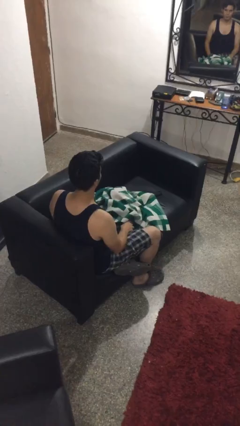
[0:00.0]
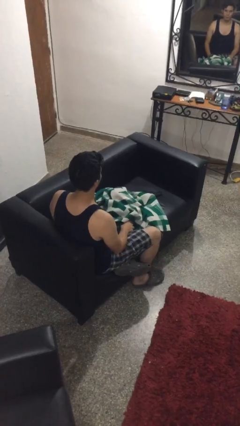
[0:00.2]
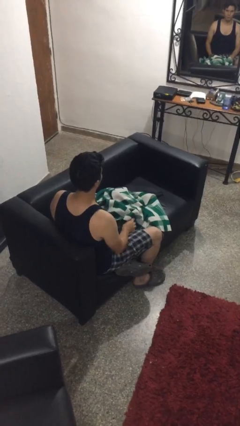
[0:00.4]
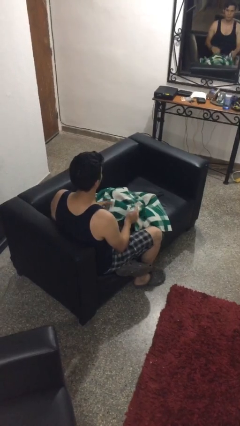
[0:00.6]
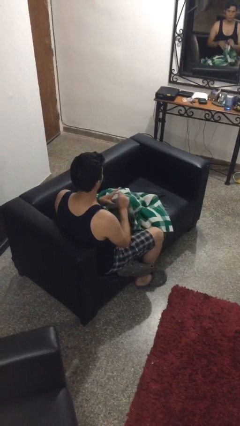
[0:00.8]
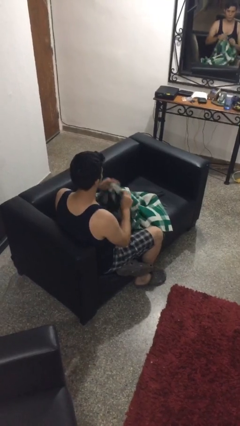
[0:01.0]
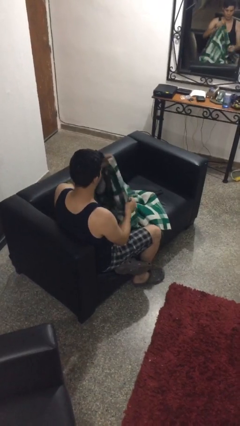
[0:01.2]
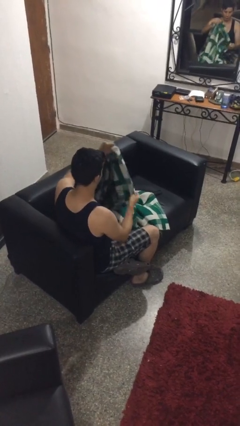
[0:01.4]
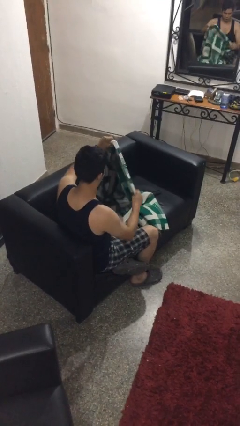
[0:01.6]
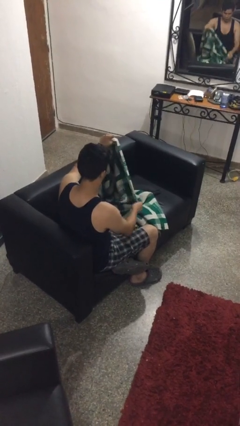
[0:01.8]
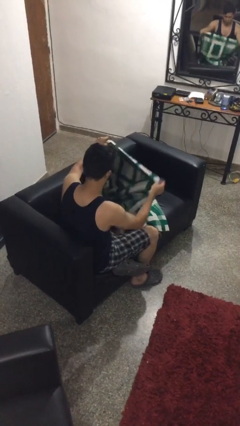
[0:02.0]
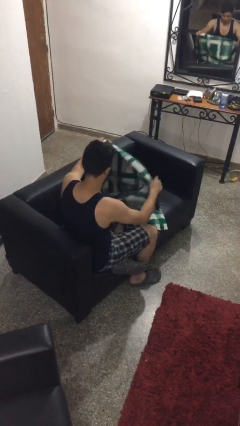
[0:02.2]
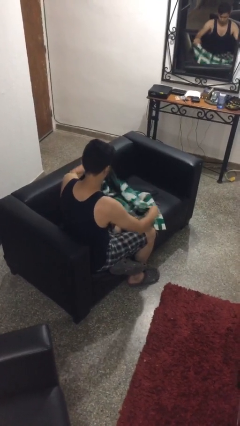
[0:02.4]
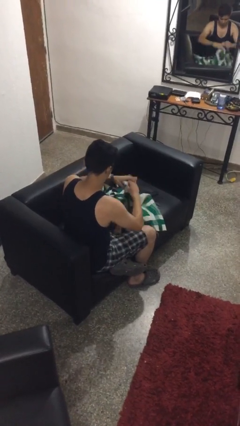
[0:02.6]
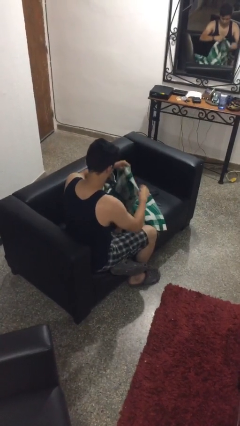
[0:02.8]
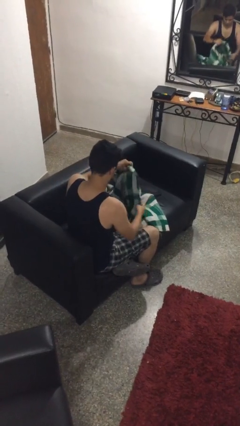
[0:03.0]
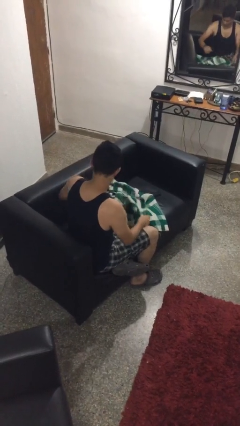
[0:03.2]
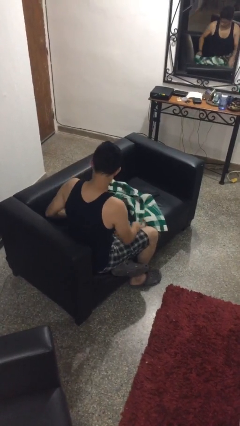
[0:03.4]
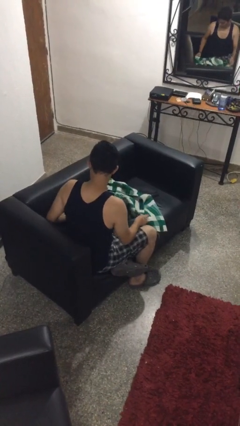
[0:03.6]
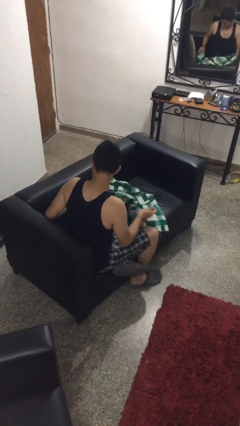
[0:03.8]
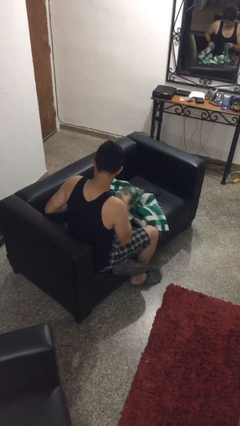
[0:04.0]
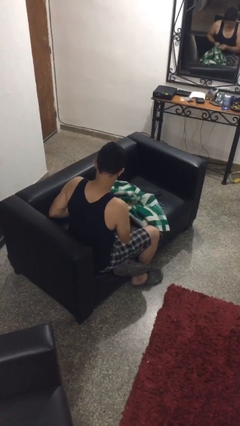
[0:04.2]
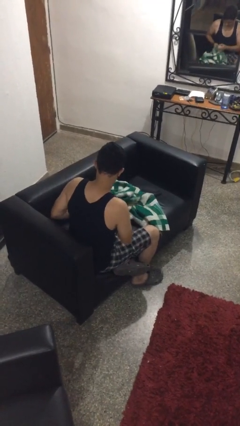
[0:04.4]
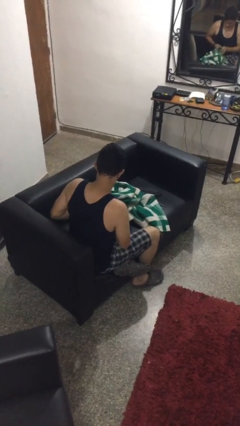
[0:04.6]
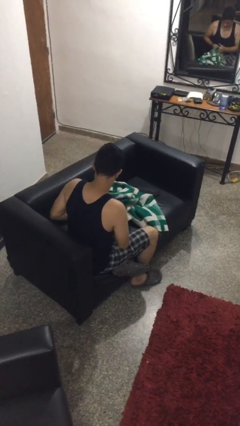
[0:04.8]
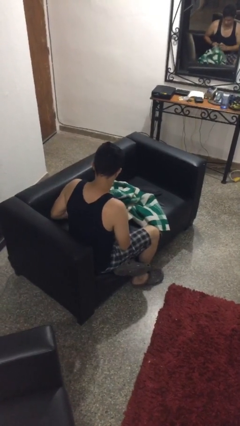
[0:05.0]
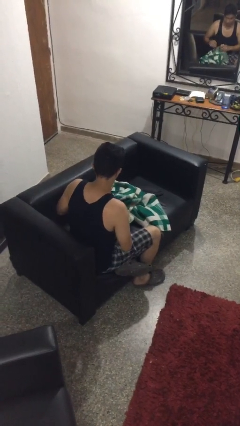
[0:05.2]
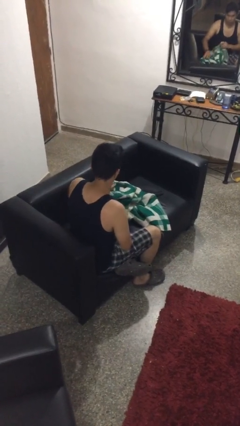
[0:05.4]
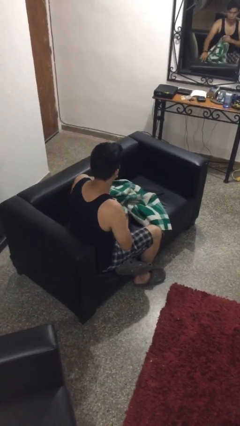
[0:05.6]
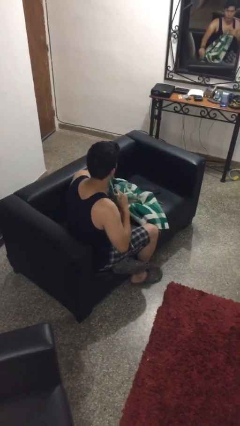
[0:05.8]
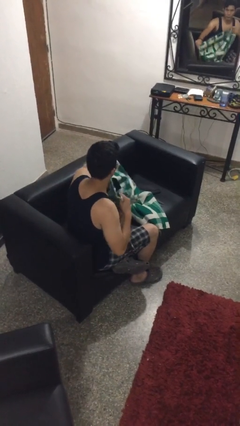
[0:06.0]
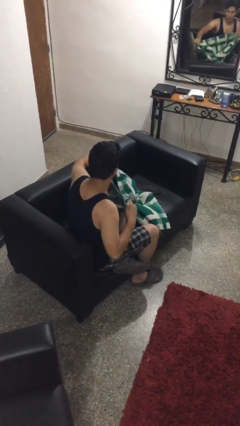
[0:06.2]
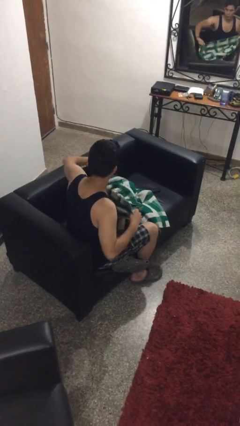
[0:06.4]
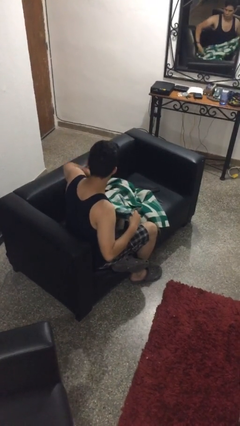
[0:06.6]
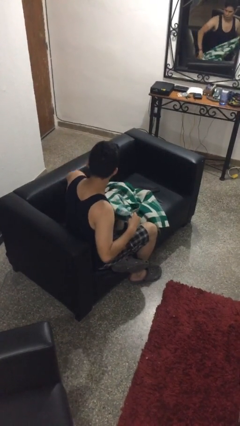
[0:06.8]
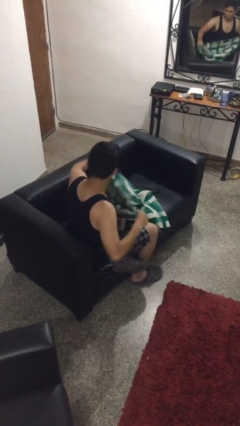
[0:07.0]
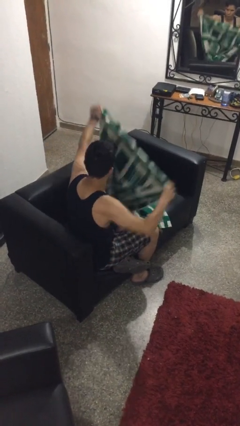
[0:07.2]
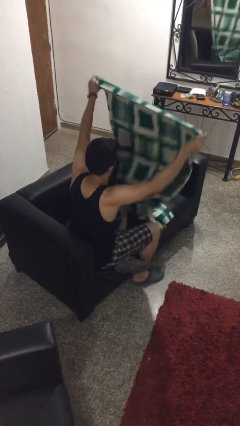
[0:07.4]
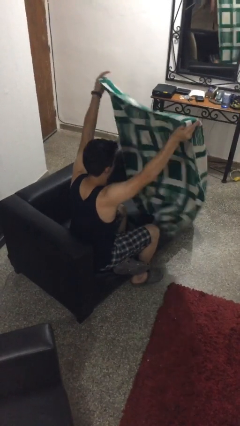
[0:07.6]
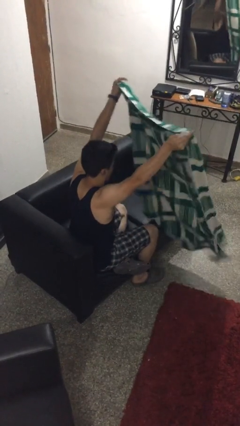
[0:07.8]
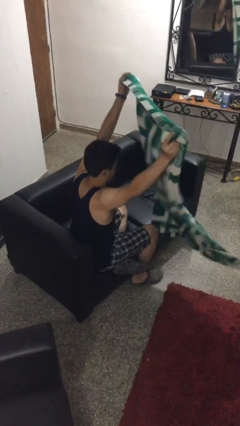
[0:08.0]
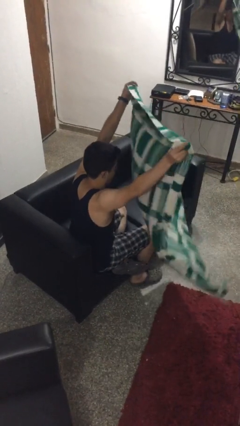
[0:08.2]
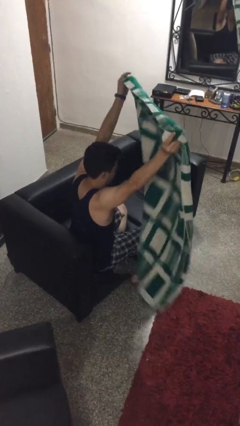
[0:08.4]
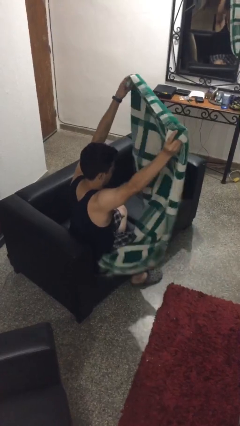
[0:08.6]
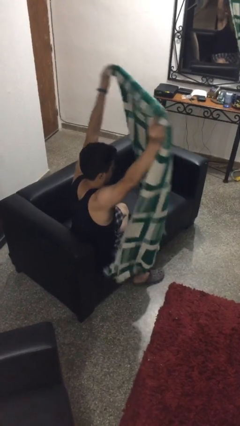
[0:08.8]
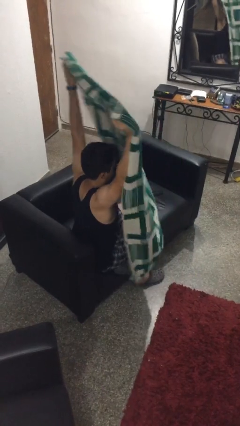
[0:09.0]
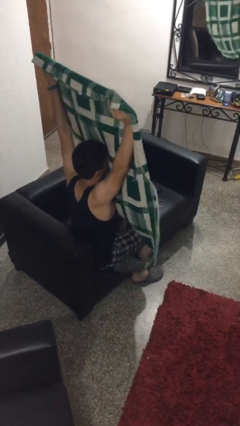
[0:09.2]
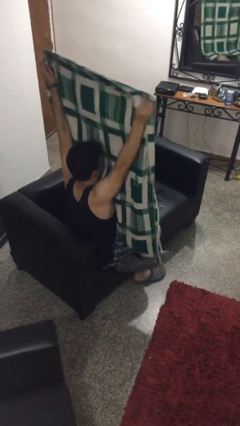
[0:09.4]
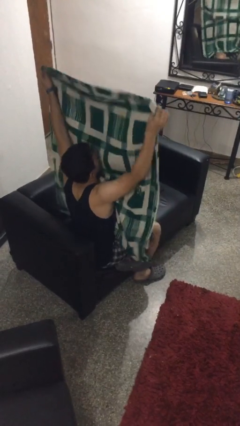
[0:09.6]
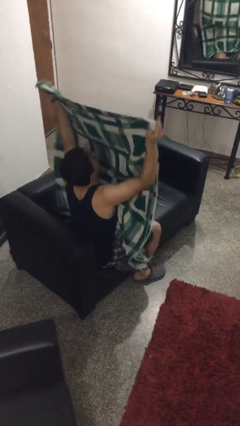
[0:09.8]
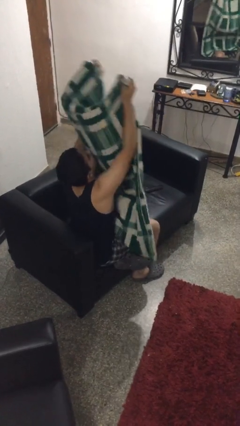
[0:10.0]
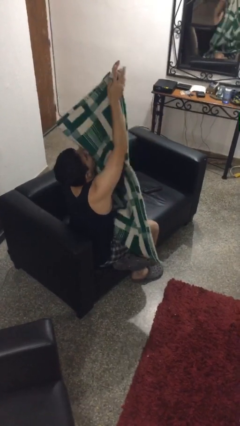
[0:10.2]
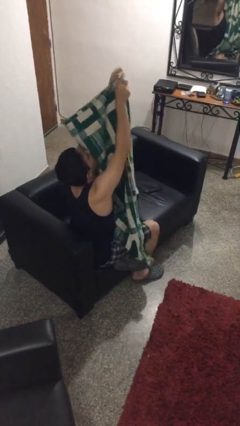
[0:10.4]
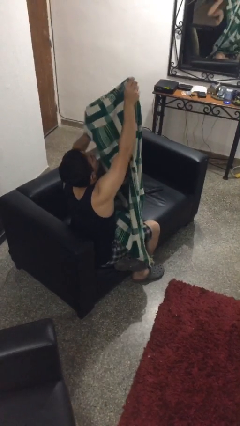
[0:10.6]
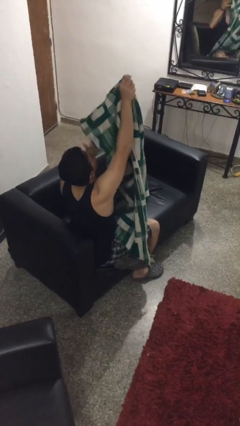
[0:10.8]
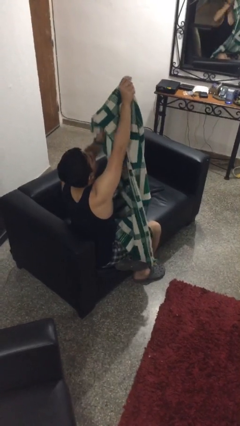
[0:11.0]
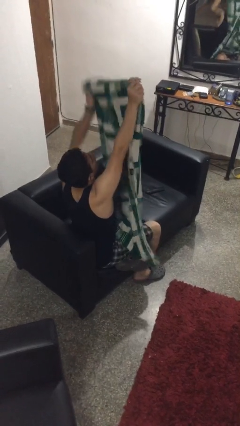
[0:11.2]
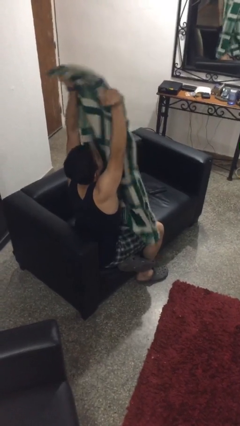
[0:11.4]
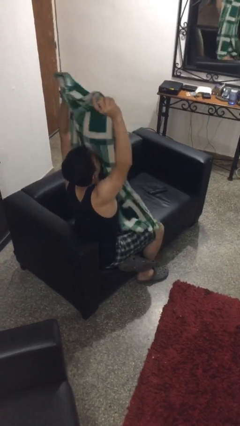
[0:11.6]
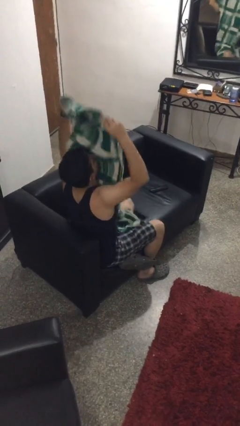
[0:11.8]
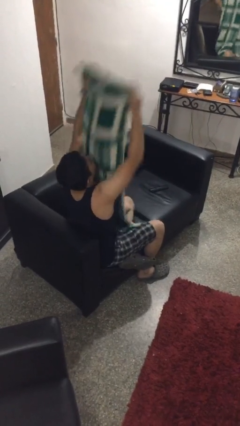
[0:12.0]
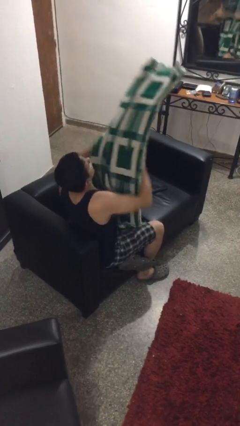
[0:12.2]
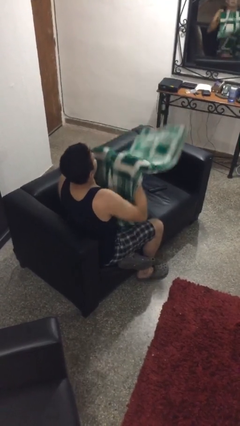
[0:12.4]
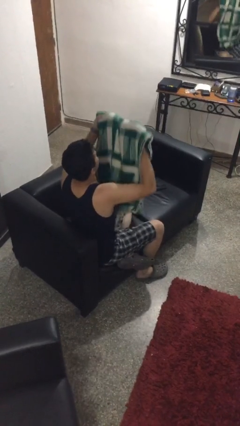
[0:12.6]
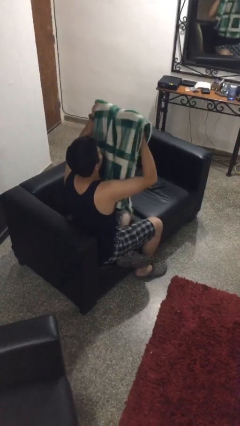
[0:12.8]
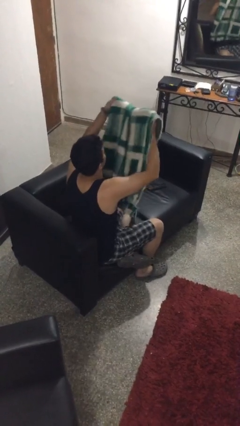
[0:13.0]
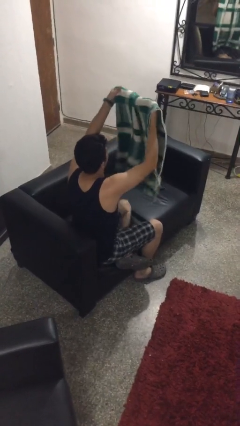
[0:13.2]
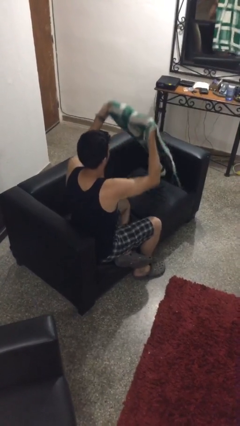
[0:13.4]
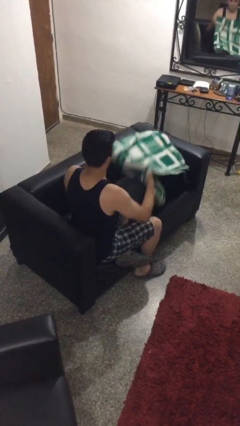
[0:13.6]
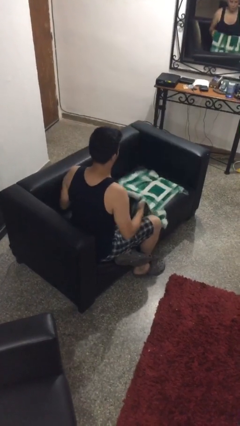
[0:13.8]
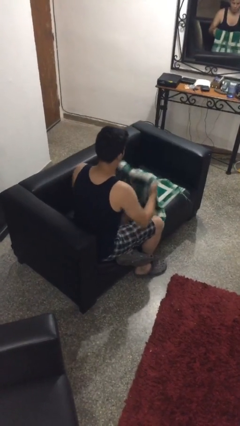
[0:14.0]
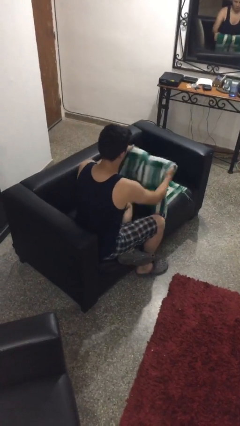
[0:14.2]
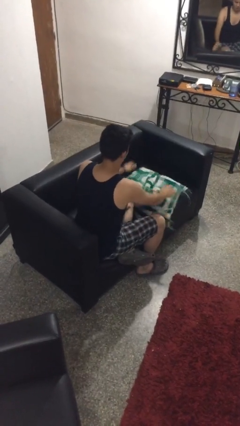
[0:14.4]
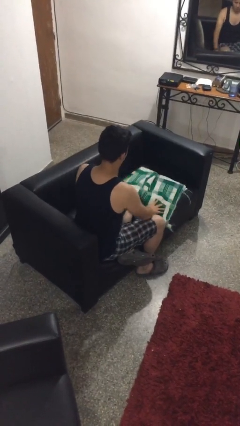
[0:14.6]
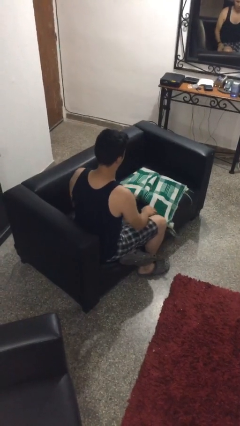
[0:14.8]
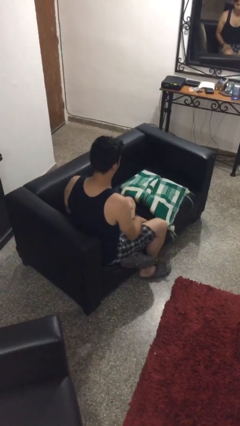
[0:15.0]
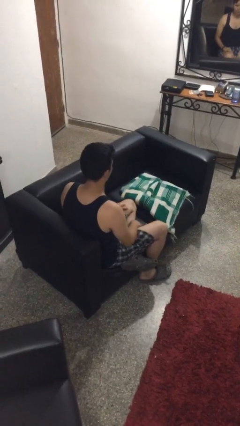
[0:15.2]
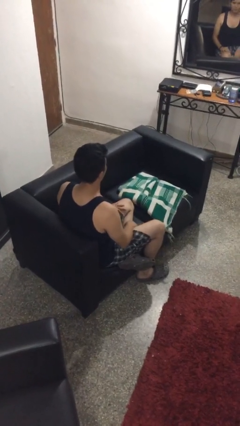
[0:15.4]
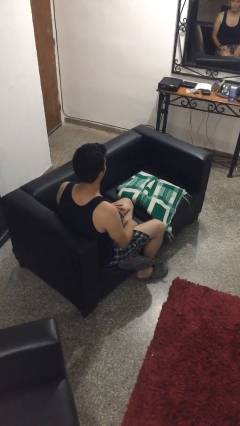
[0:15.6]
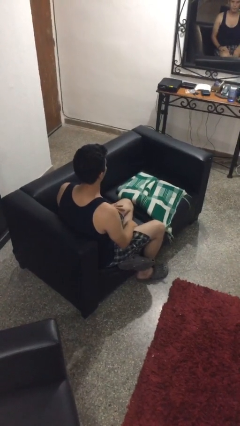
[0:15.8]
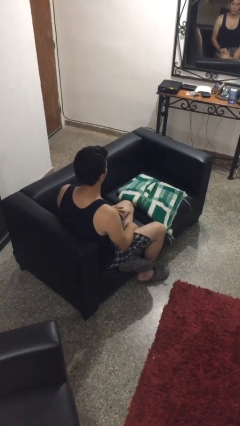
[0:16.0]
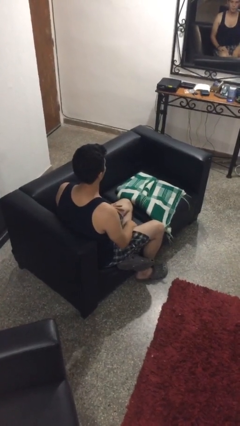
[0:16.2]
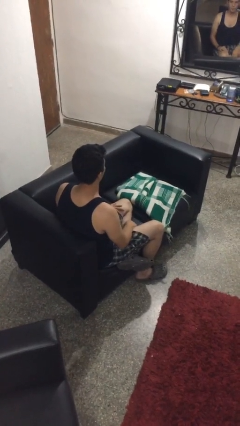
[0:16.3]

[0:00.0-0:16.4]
person folds blanket

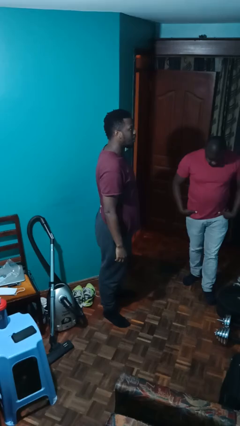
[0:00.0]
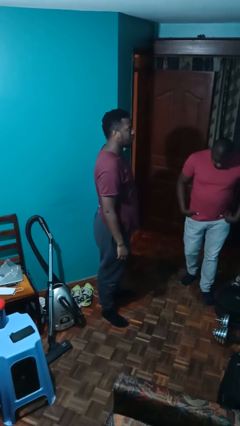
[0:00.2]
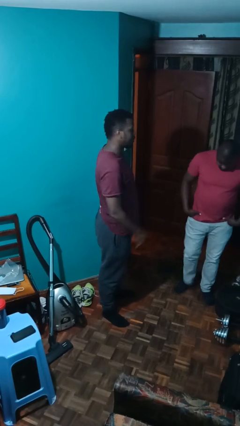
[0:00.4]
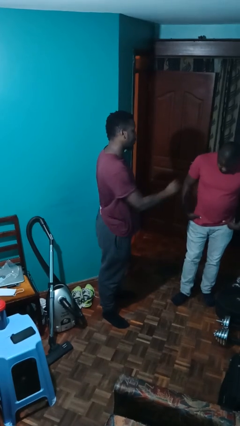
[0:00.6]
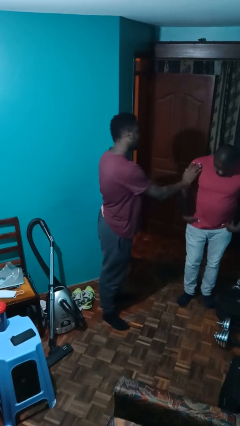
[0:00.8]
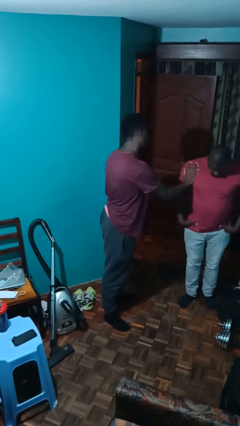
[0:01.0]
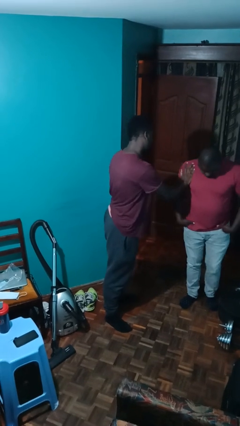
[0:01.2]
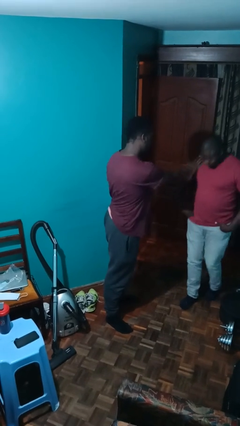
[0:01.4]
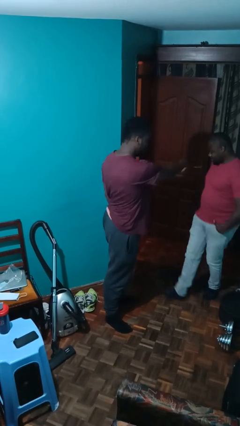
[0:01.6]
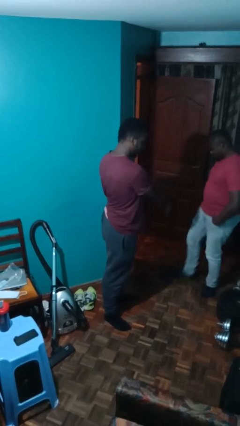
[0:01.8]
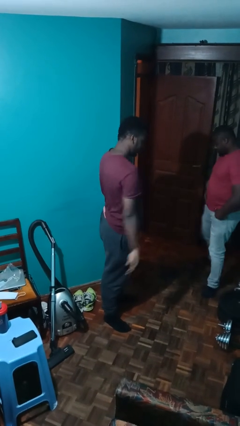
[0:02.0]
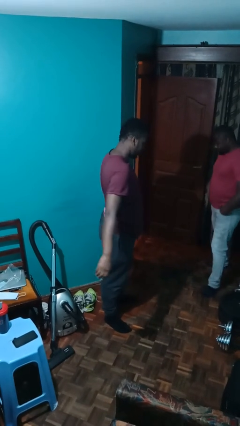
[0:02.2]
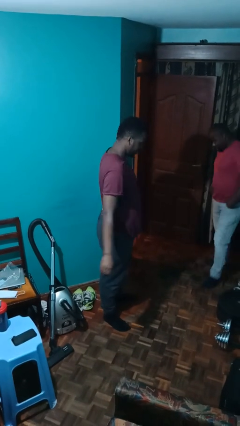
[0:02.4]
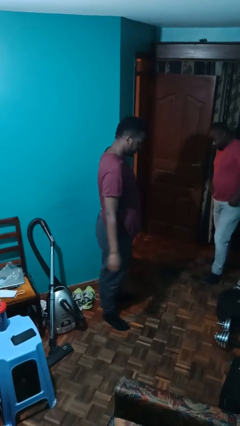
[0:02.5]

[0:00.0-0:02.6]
person shoves person
